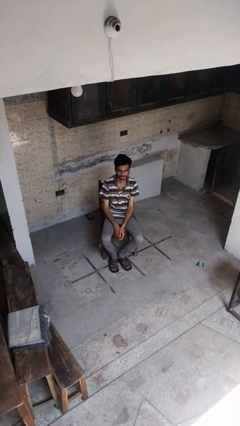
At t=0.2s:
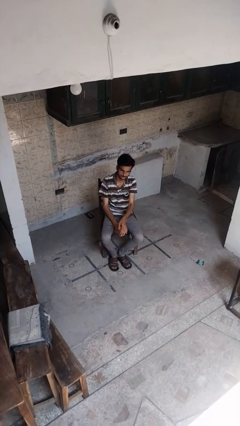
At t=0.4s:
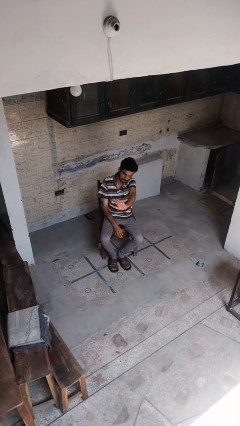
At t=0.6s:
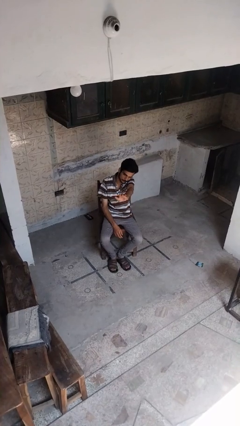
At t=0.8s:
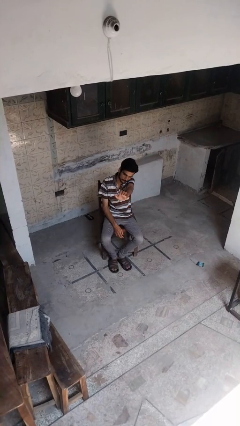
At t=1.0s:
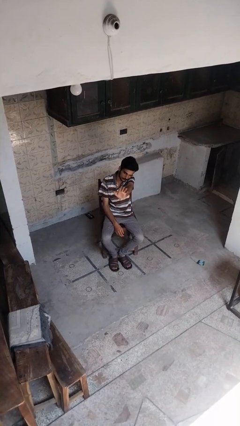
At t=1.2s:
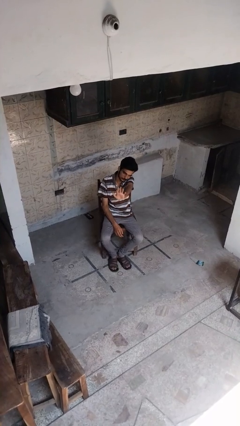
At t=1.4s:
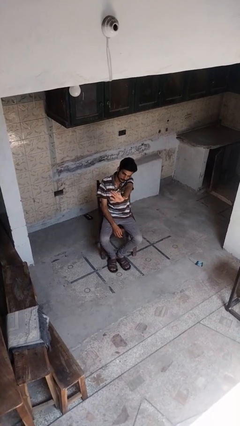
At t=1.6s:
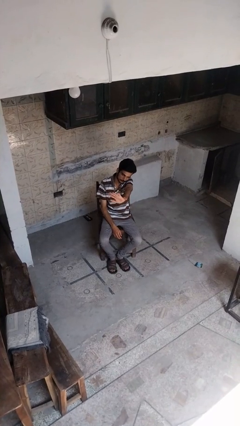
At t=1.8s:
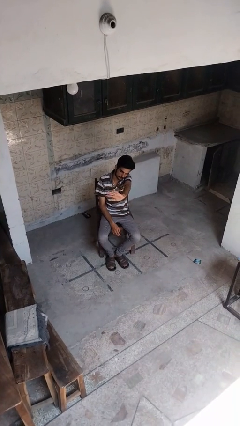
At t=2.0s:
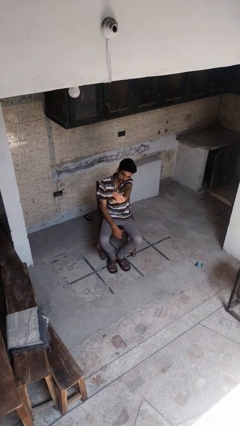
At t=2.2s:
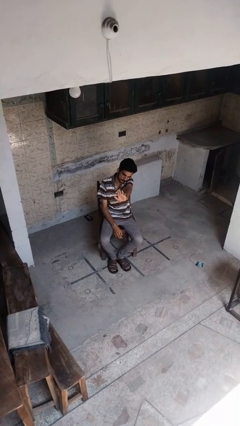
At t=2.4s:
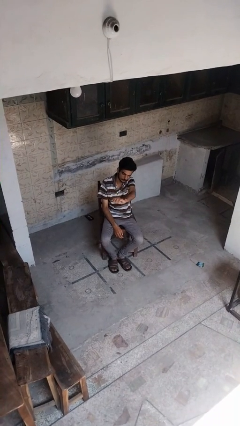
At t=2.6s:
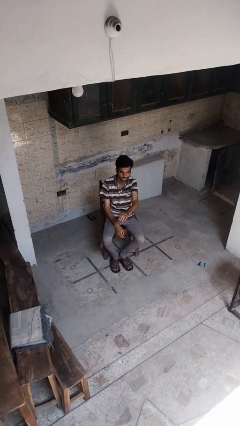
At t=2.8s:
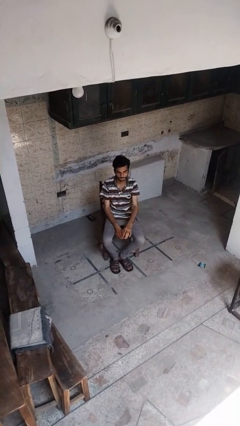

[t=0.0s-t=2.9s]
person waves at person

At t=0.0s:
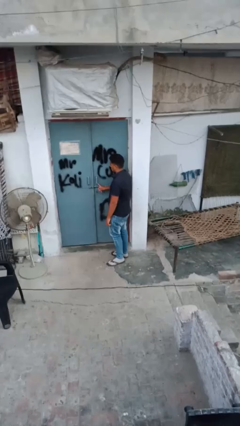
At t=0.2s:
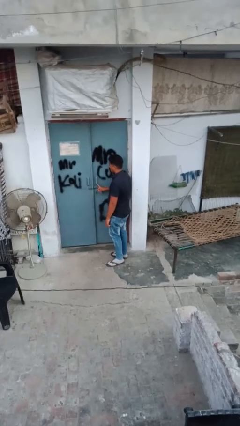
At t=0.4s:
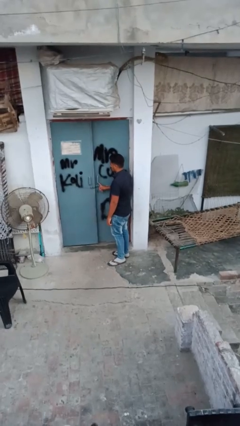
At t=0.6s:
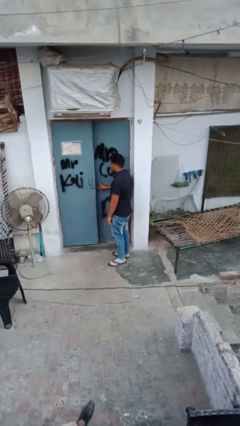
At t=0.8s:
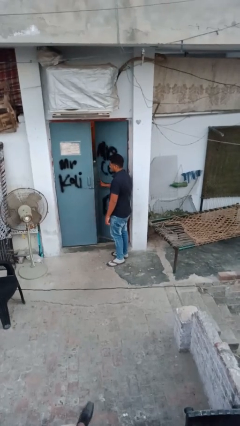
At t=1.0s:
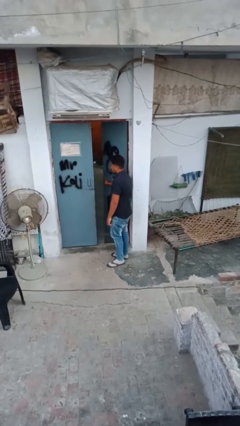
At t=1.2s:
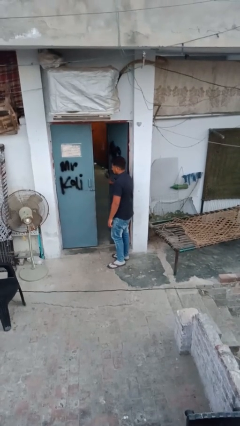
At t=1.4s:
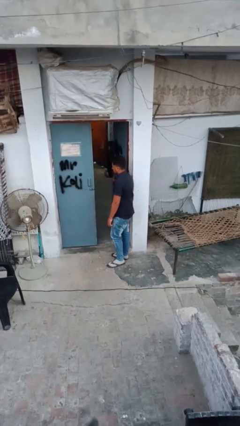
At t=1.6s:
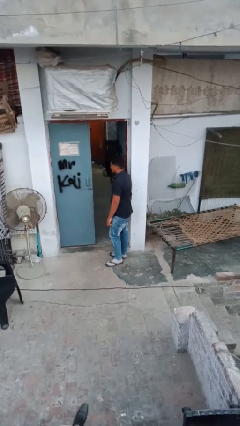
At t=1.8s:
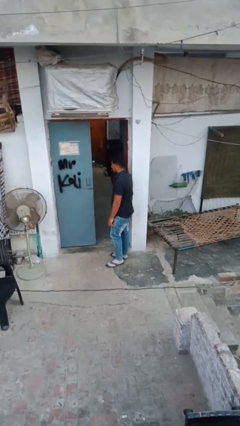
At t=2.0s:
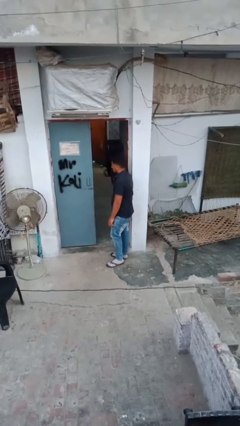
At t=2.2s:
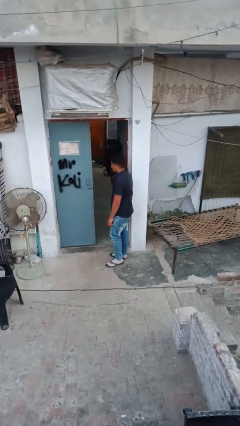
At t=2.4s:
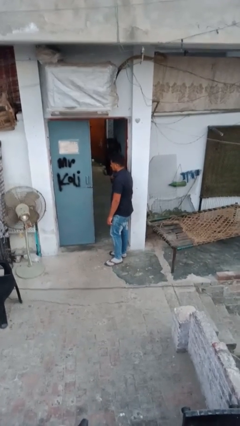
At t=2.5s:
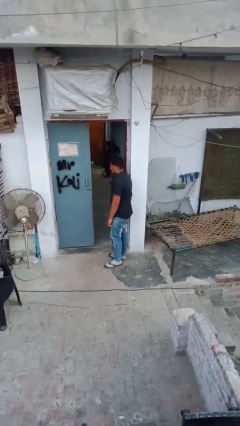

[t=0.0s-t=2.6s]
person opens facility door

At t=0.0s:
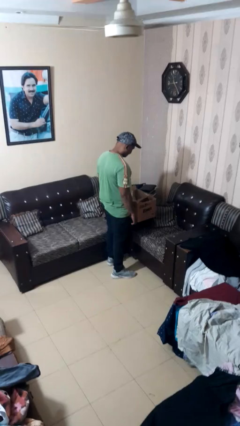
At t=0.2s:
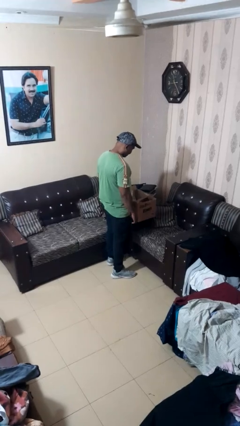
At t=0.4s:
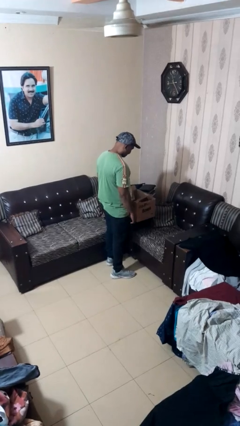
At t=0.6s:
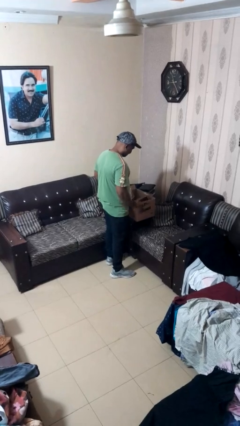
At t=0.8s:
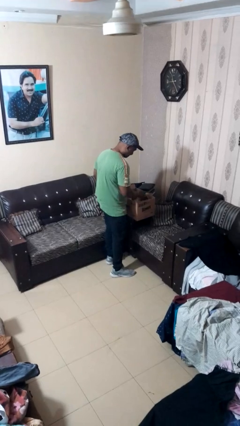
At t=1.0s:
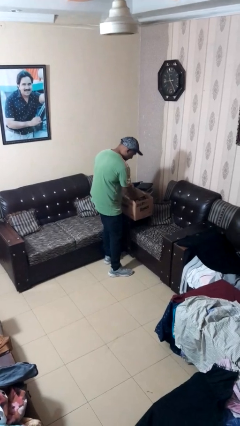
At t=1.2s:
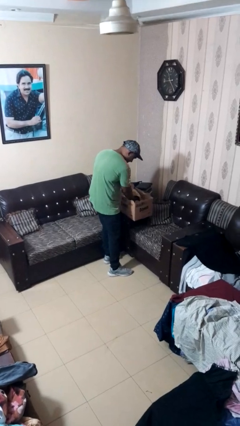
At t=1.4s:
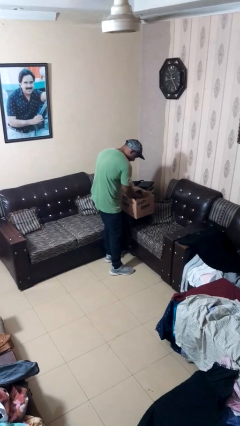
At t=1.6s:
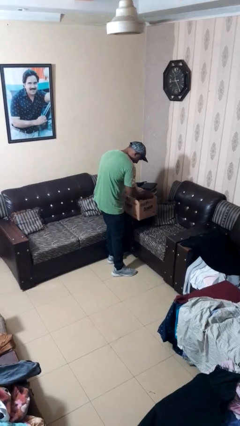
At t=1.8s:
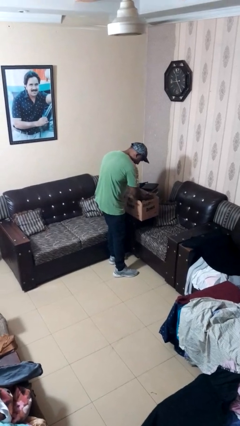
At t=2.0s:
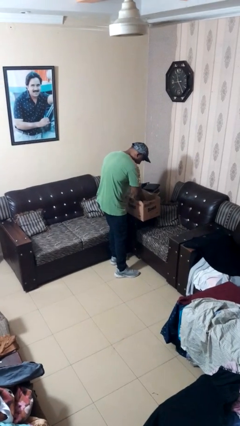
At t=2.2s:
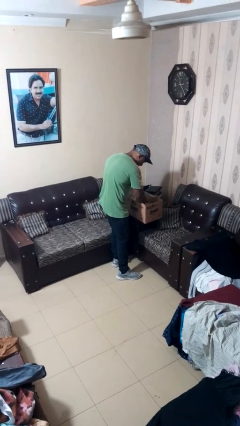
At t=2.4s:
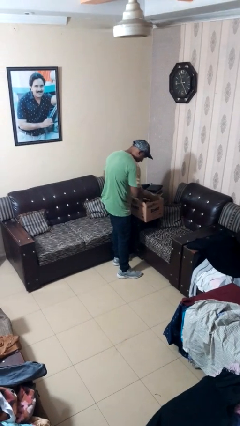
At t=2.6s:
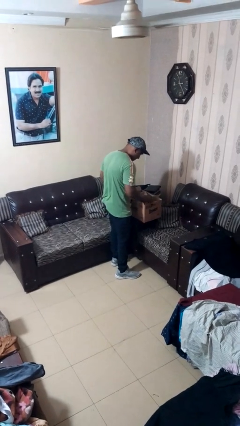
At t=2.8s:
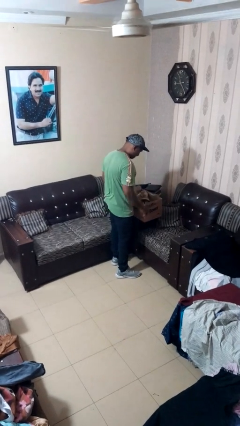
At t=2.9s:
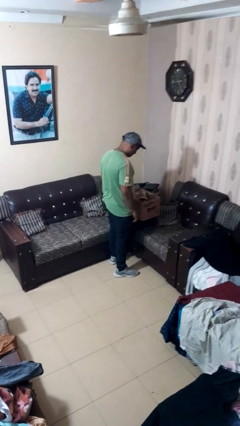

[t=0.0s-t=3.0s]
person searches in box

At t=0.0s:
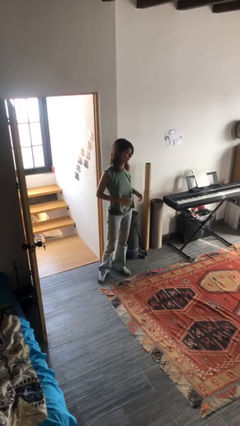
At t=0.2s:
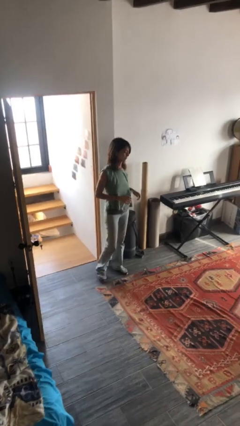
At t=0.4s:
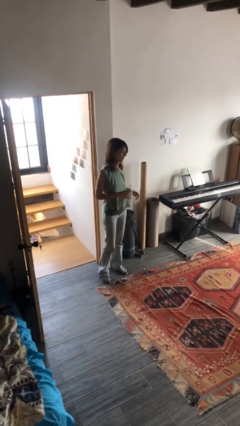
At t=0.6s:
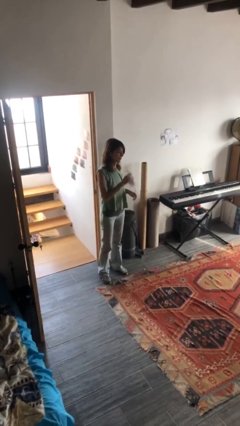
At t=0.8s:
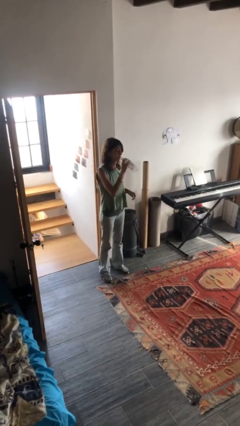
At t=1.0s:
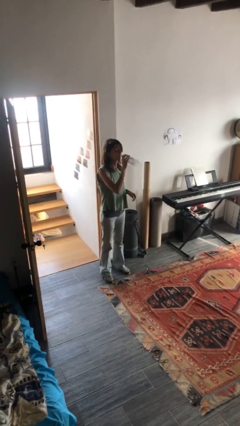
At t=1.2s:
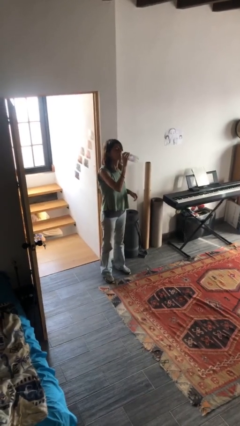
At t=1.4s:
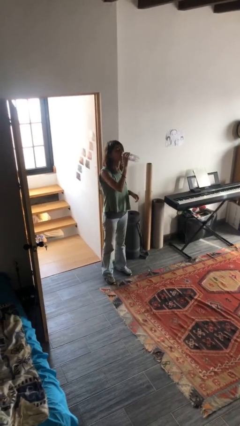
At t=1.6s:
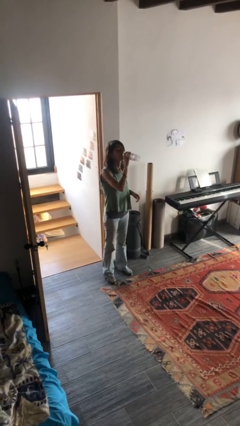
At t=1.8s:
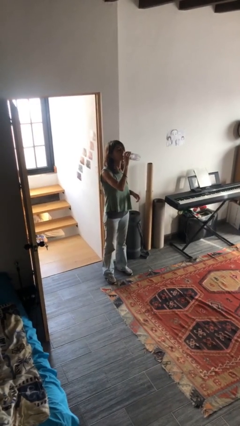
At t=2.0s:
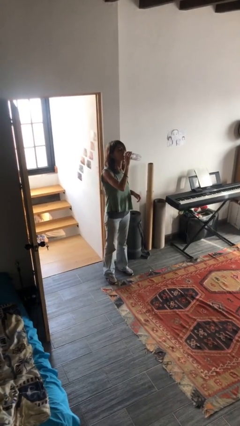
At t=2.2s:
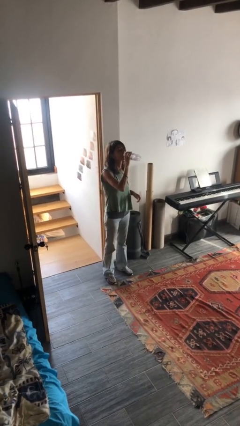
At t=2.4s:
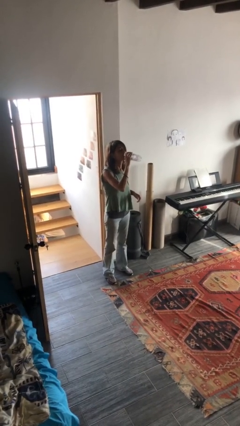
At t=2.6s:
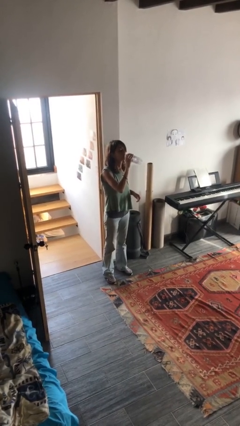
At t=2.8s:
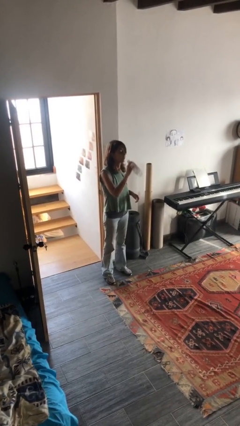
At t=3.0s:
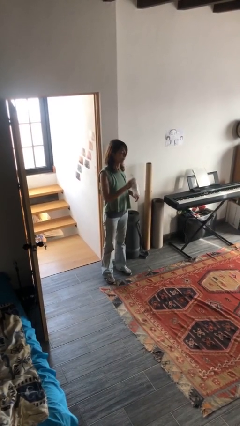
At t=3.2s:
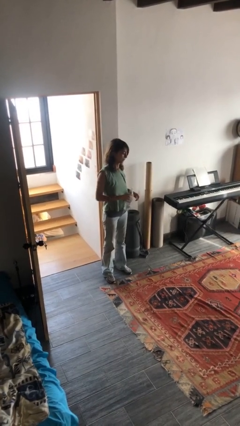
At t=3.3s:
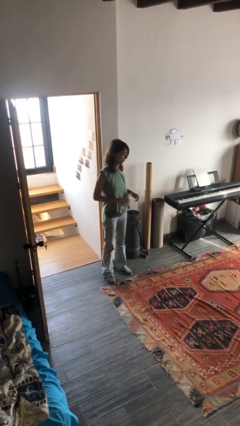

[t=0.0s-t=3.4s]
person drinks from bottle

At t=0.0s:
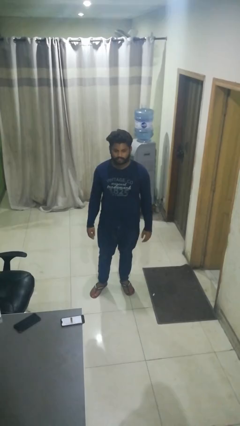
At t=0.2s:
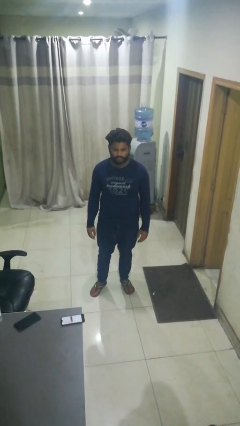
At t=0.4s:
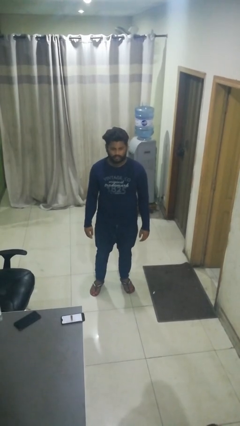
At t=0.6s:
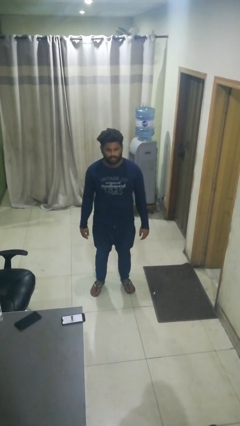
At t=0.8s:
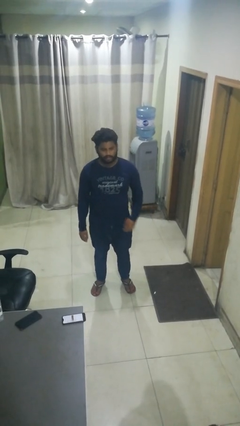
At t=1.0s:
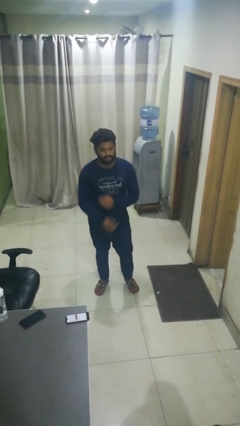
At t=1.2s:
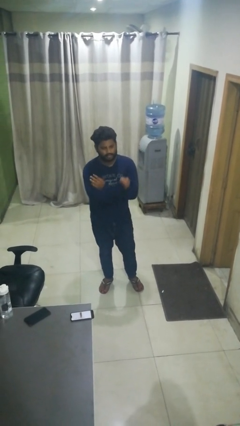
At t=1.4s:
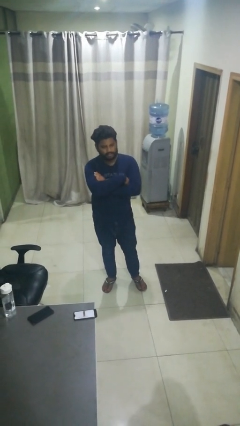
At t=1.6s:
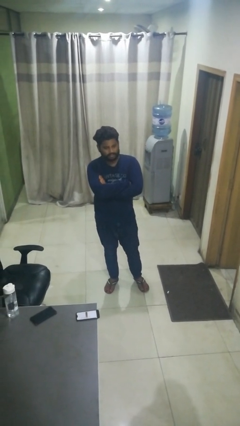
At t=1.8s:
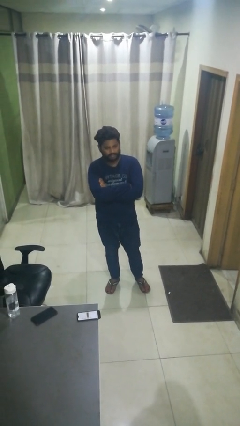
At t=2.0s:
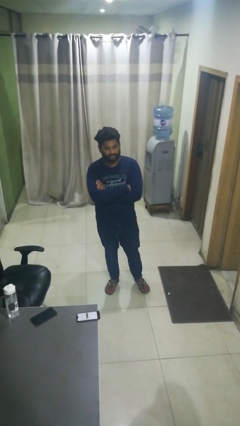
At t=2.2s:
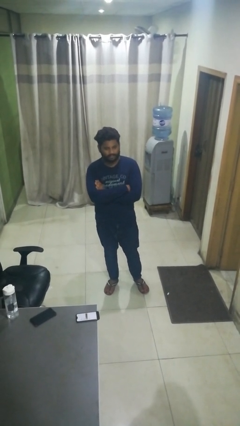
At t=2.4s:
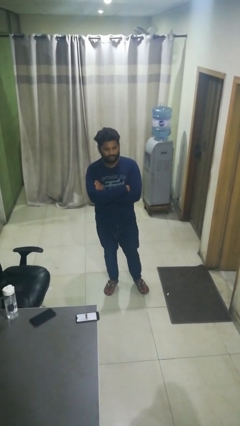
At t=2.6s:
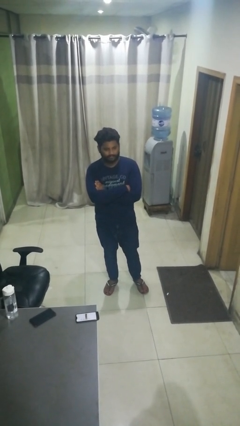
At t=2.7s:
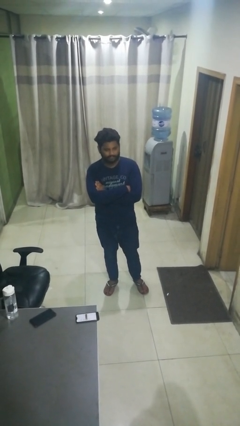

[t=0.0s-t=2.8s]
person crosses arms

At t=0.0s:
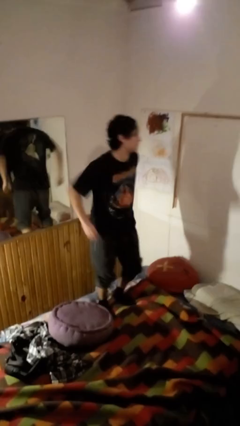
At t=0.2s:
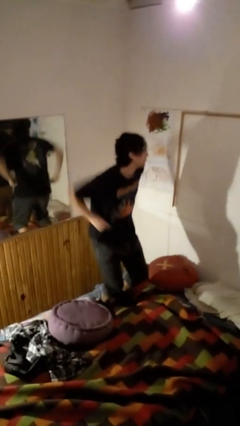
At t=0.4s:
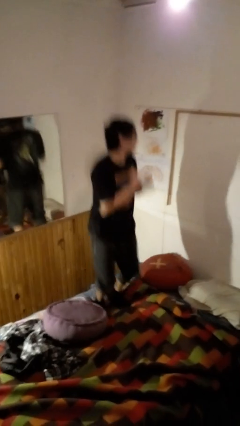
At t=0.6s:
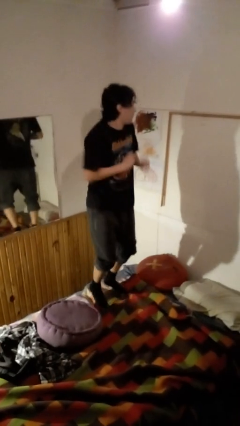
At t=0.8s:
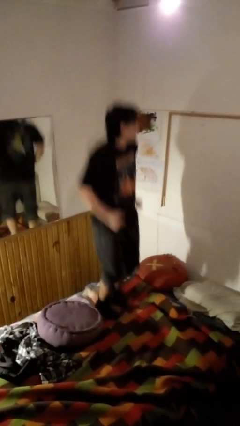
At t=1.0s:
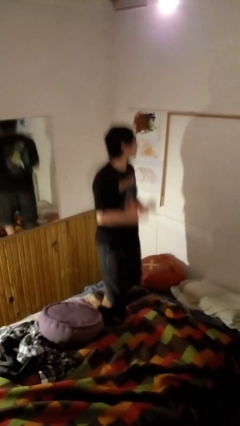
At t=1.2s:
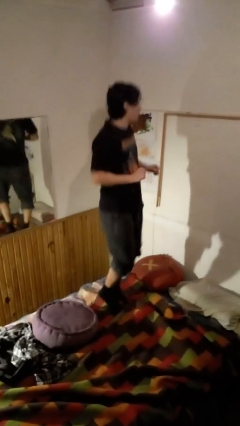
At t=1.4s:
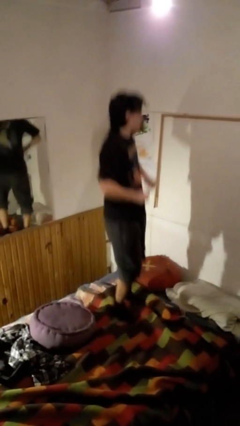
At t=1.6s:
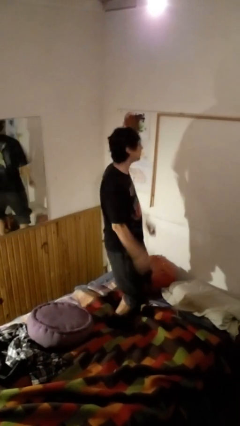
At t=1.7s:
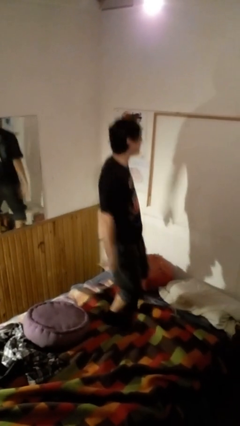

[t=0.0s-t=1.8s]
person jumps on bed

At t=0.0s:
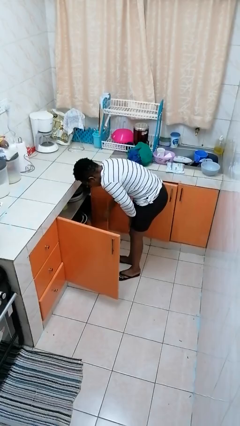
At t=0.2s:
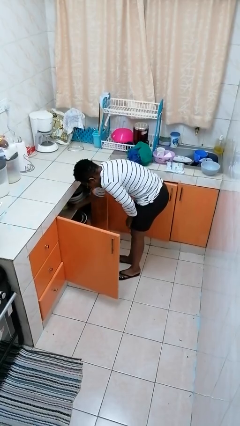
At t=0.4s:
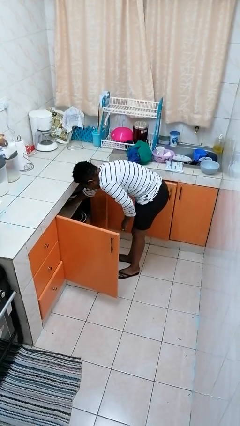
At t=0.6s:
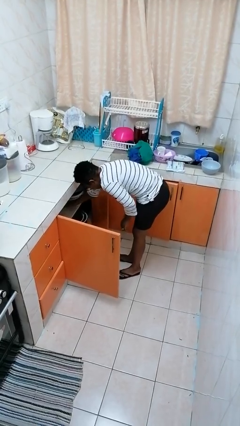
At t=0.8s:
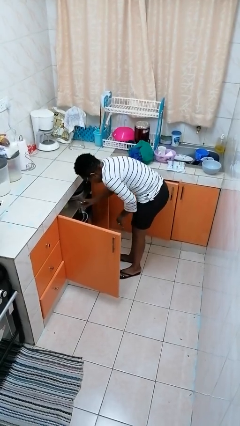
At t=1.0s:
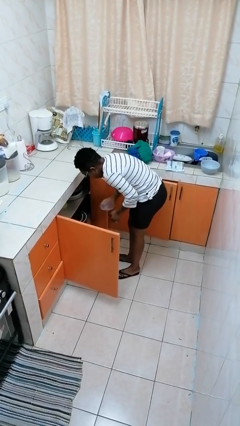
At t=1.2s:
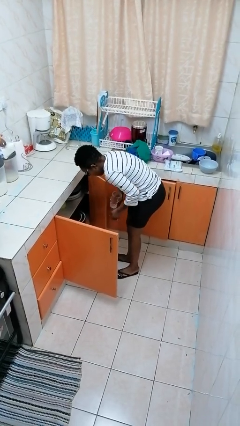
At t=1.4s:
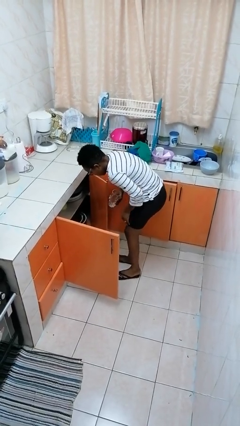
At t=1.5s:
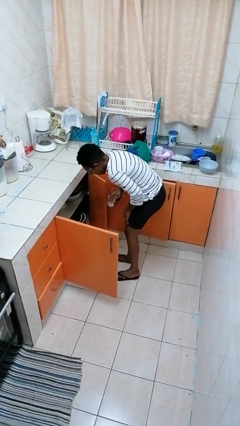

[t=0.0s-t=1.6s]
person takes object from cabinet
